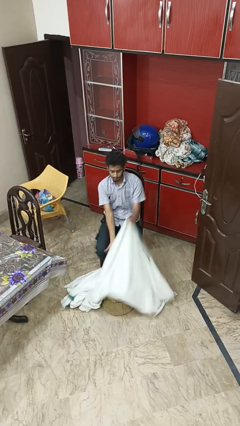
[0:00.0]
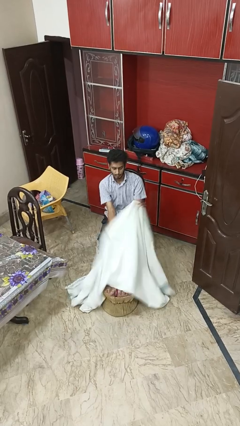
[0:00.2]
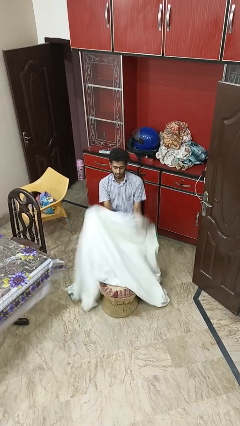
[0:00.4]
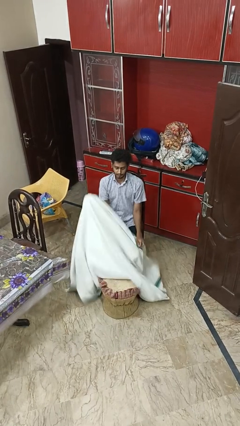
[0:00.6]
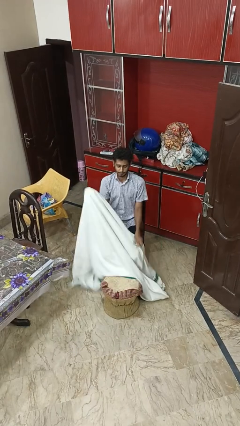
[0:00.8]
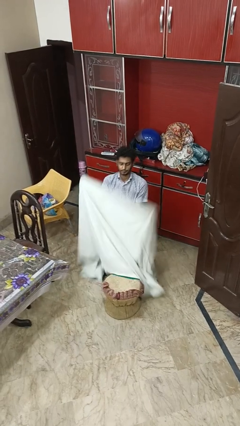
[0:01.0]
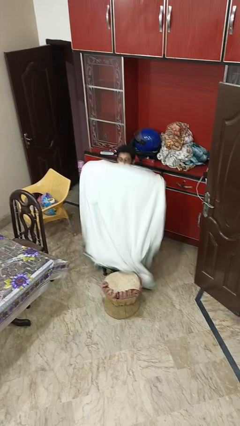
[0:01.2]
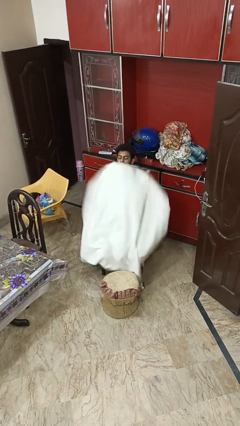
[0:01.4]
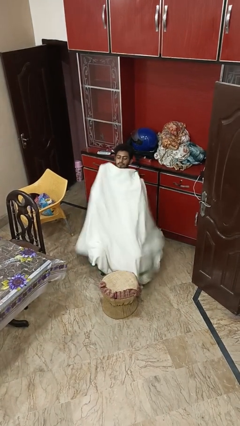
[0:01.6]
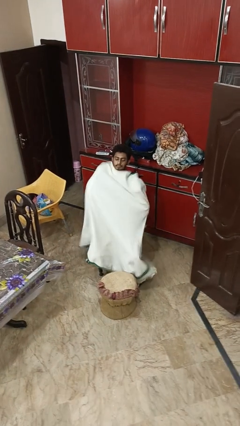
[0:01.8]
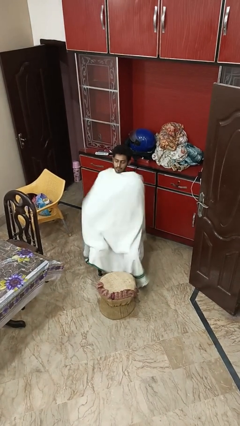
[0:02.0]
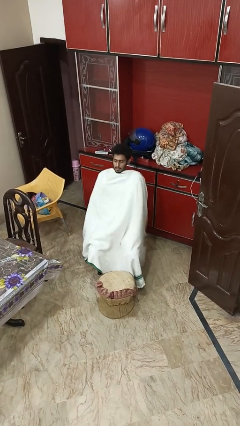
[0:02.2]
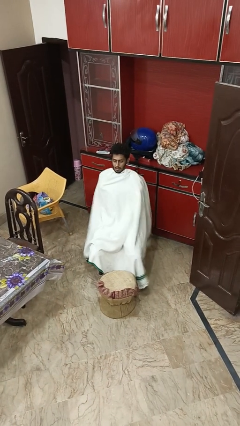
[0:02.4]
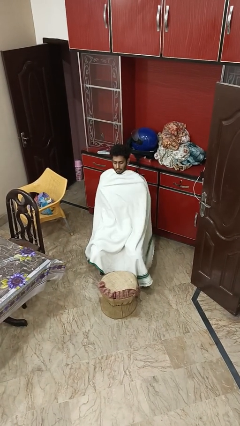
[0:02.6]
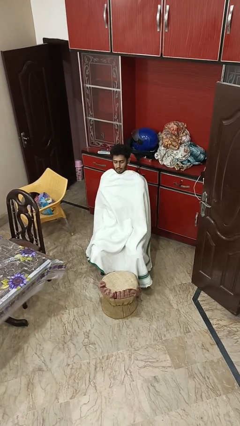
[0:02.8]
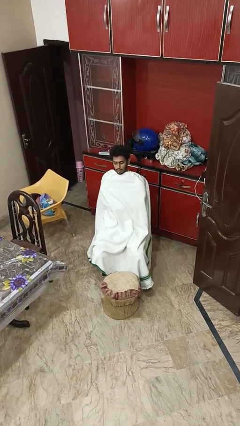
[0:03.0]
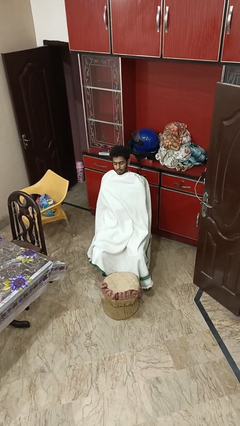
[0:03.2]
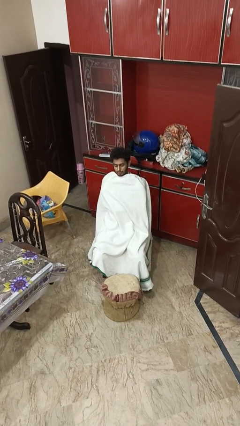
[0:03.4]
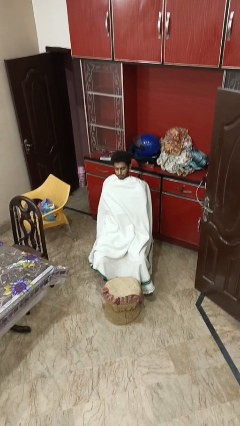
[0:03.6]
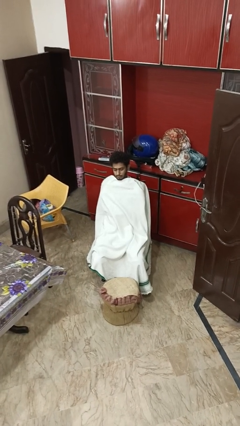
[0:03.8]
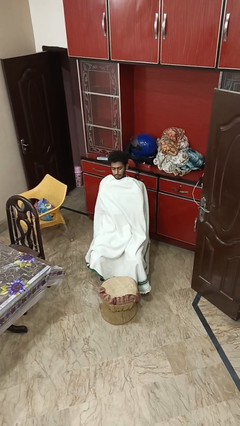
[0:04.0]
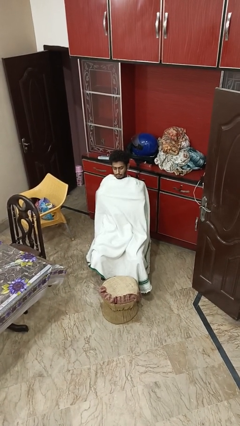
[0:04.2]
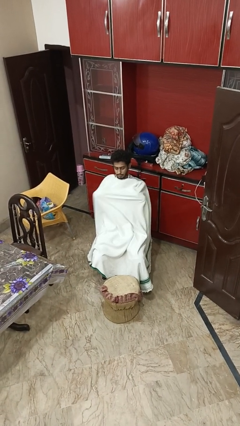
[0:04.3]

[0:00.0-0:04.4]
person covers with blanket

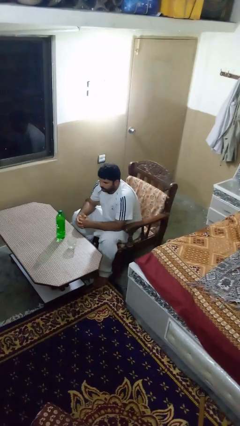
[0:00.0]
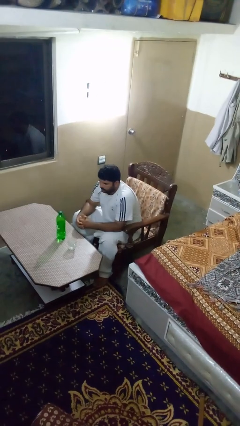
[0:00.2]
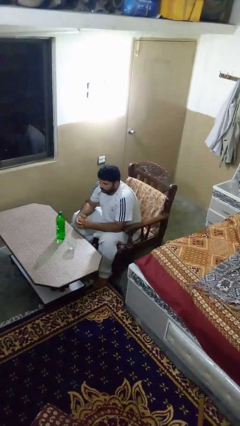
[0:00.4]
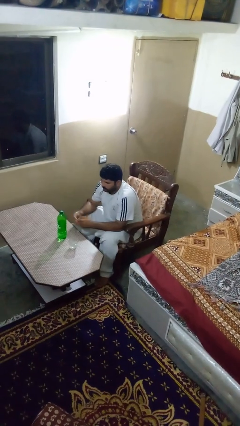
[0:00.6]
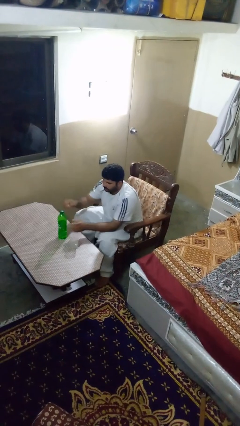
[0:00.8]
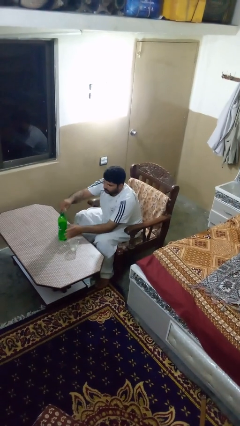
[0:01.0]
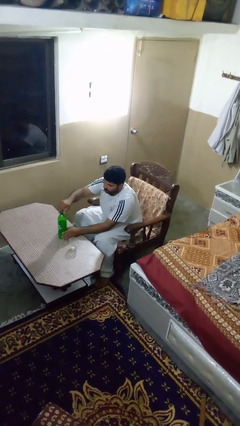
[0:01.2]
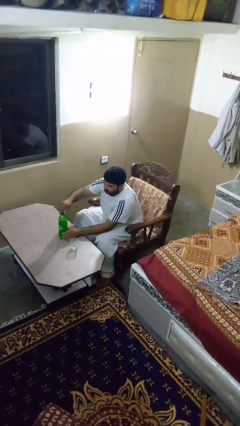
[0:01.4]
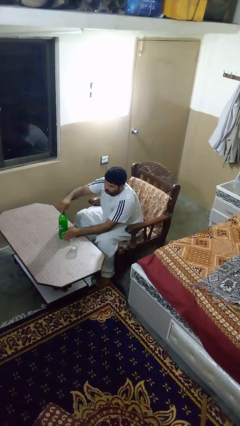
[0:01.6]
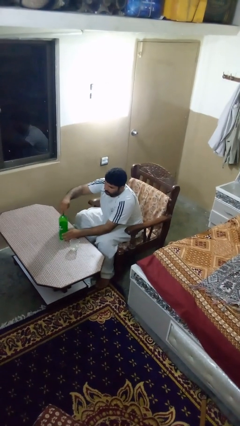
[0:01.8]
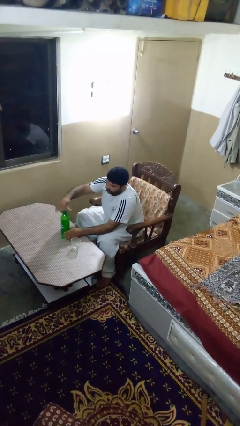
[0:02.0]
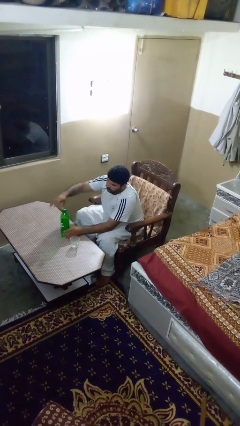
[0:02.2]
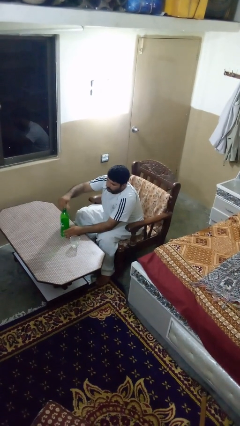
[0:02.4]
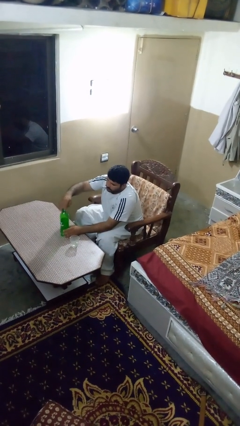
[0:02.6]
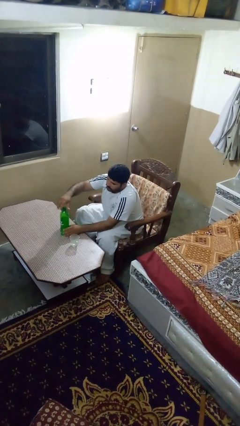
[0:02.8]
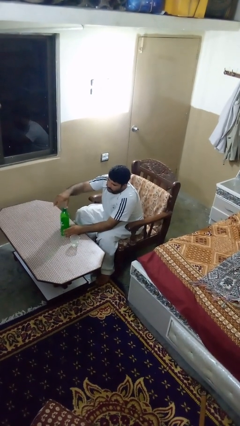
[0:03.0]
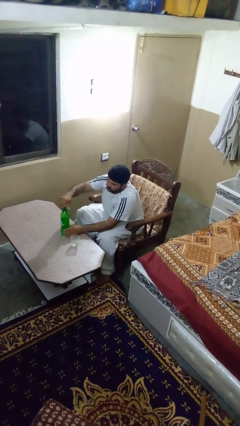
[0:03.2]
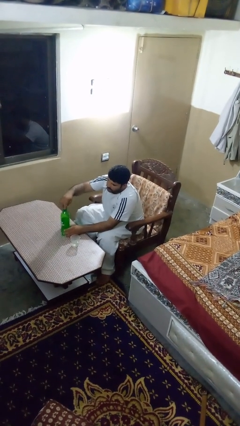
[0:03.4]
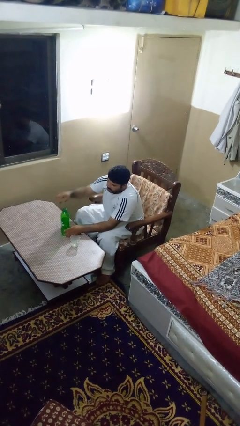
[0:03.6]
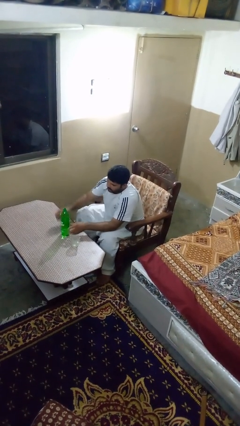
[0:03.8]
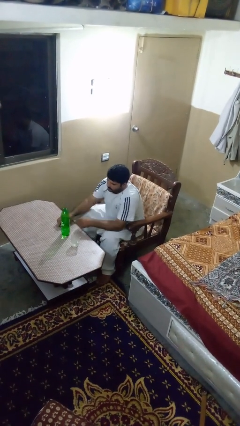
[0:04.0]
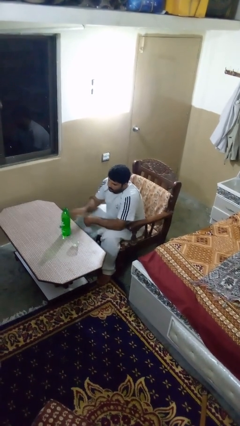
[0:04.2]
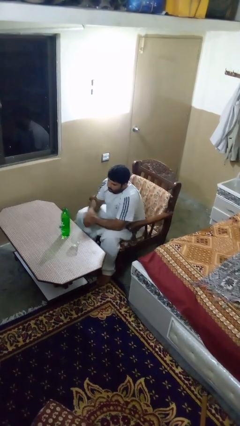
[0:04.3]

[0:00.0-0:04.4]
person unscrews lid from bottle

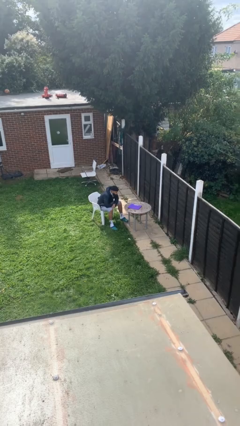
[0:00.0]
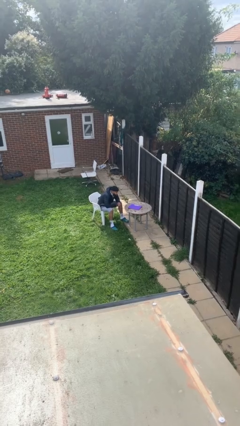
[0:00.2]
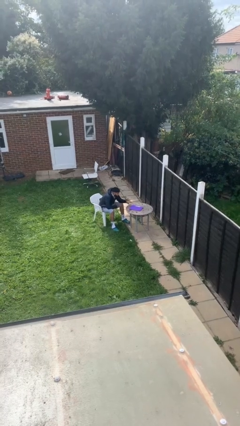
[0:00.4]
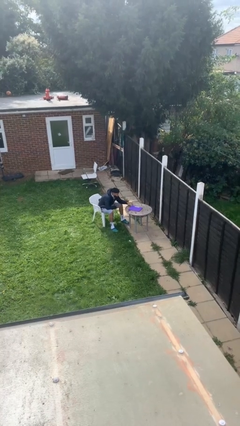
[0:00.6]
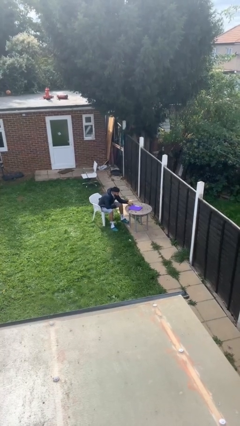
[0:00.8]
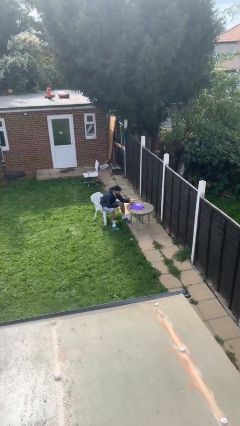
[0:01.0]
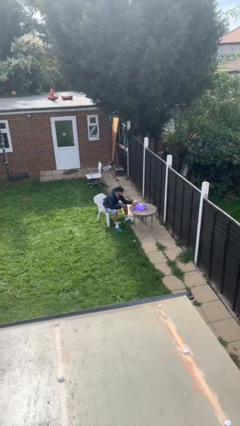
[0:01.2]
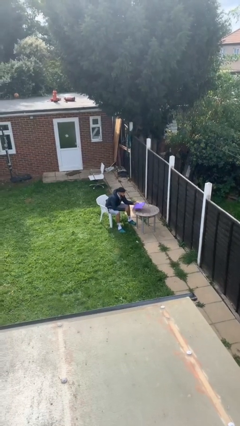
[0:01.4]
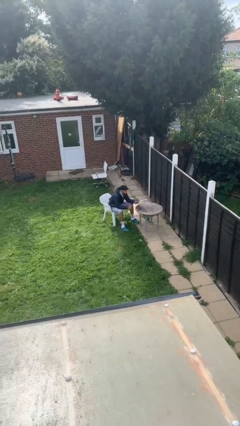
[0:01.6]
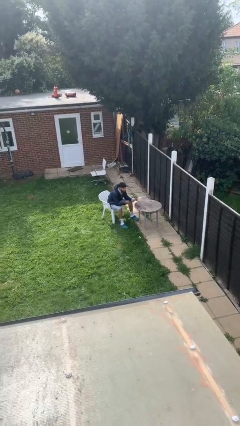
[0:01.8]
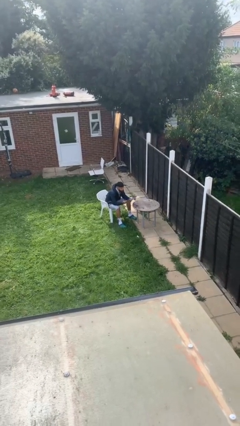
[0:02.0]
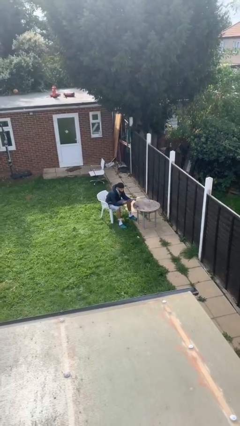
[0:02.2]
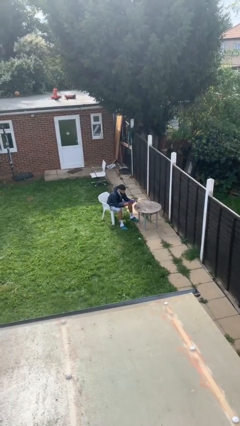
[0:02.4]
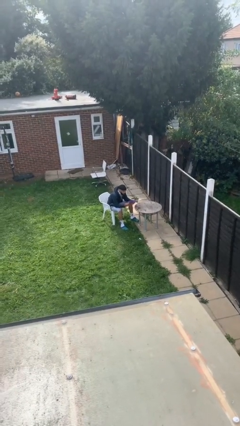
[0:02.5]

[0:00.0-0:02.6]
person picks up object from table

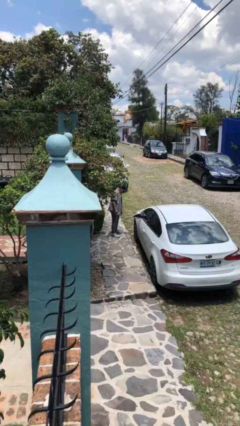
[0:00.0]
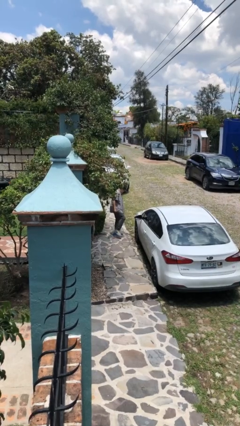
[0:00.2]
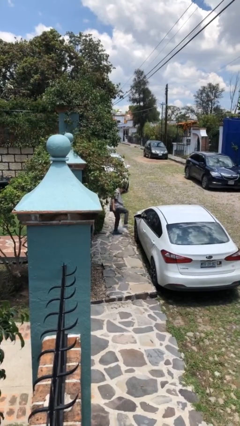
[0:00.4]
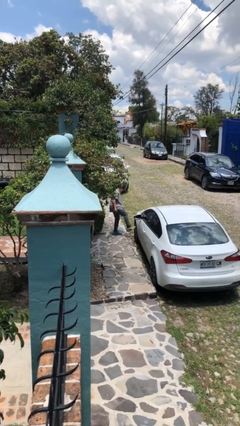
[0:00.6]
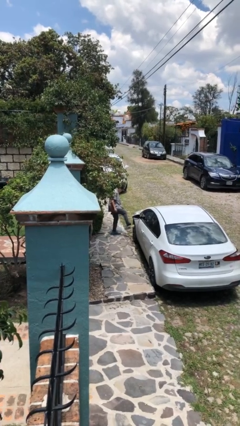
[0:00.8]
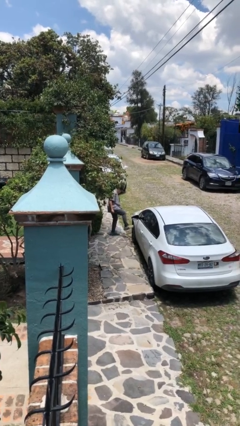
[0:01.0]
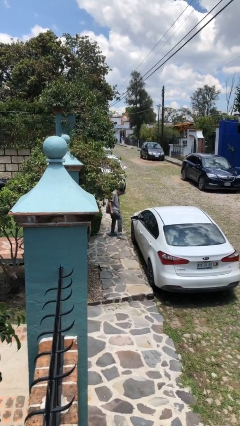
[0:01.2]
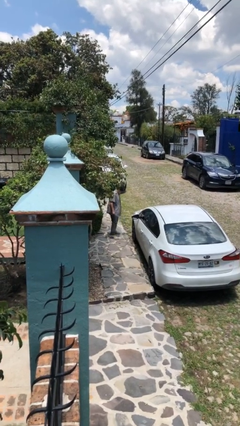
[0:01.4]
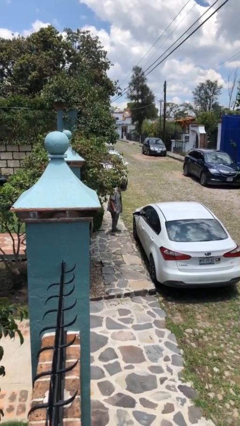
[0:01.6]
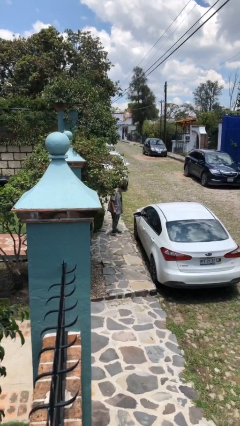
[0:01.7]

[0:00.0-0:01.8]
person kicks car tires

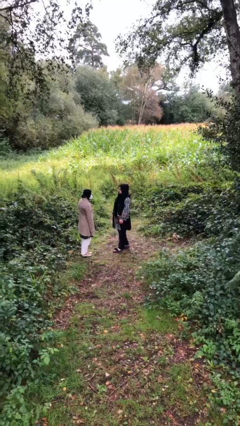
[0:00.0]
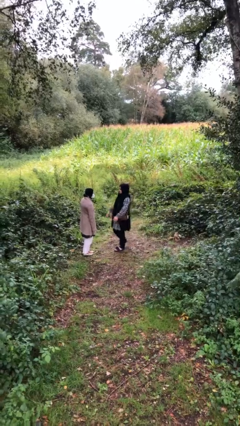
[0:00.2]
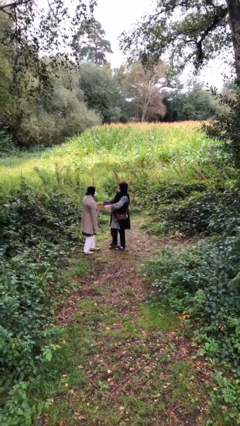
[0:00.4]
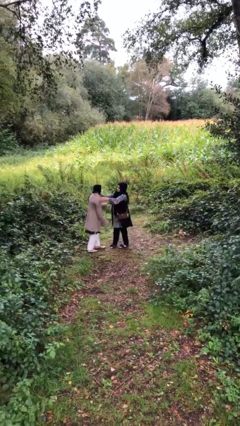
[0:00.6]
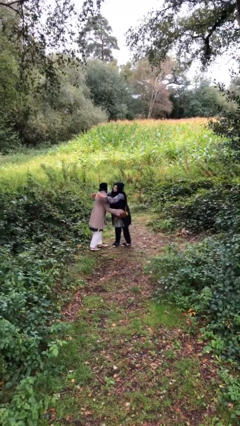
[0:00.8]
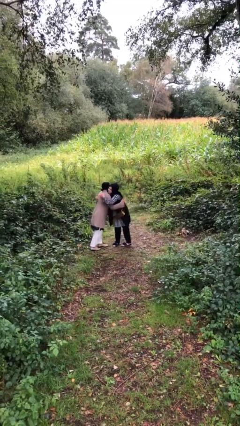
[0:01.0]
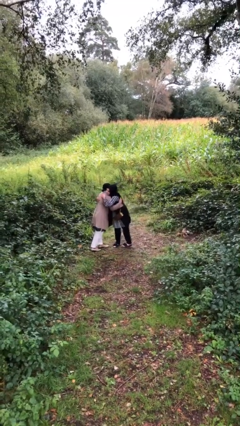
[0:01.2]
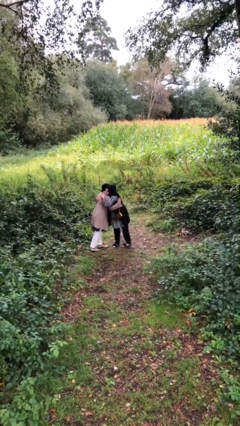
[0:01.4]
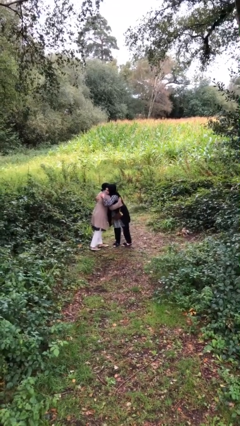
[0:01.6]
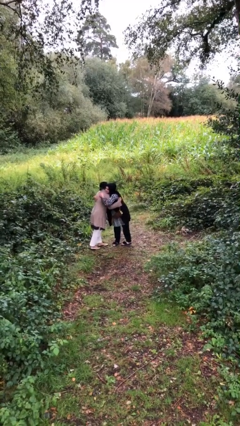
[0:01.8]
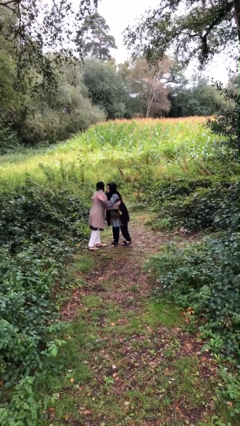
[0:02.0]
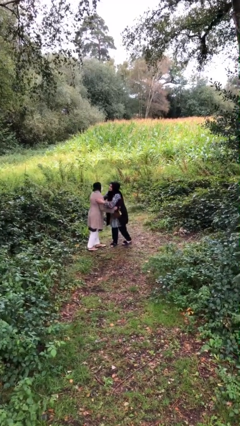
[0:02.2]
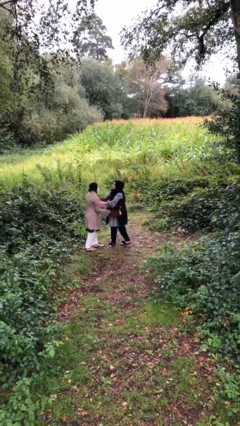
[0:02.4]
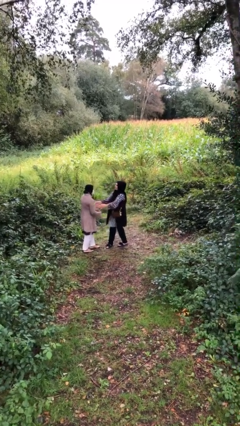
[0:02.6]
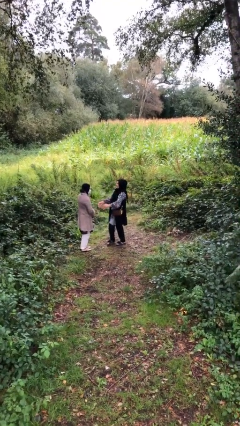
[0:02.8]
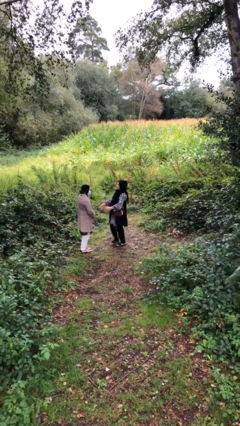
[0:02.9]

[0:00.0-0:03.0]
person embraces person

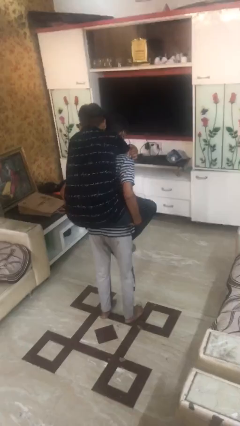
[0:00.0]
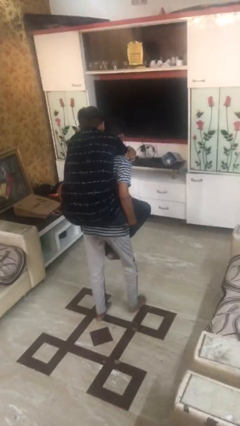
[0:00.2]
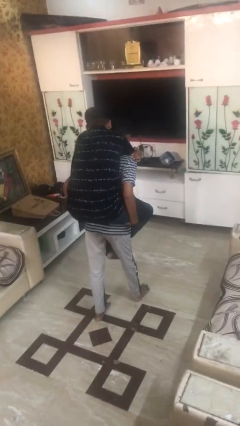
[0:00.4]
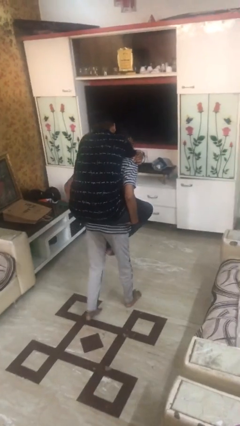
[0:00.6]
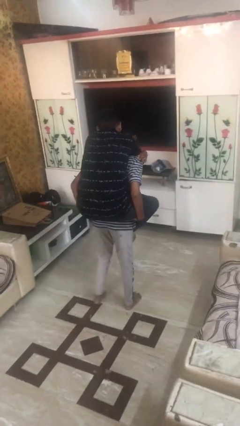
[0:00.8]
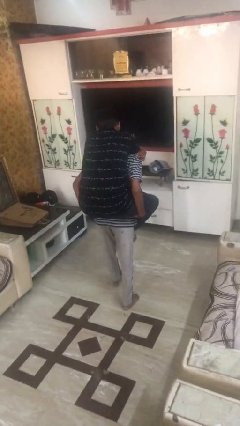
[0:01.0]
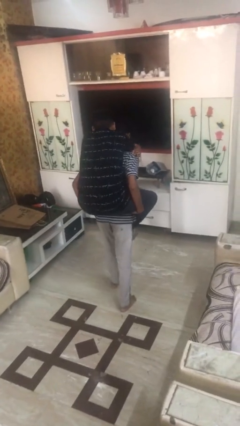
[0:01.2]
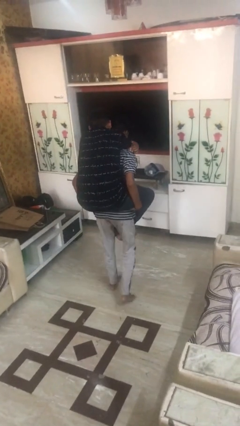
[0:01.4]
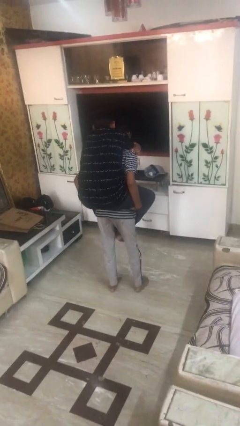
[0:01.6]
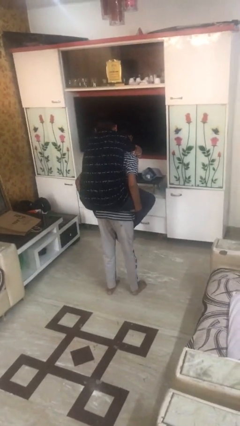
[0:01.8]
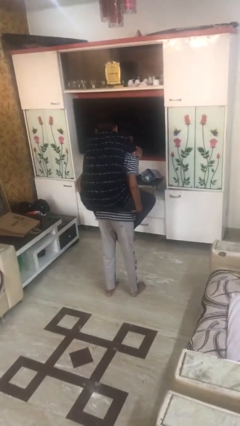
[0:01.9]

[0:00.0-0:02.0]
person carries person on back
